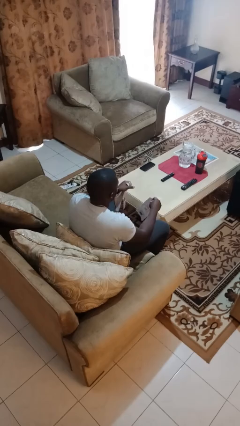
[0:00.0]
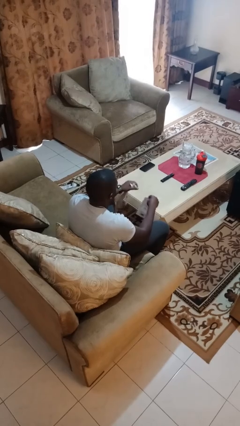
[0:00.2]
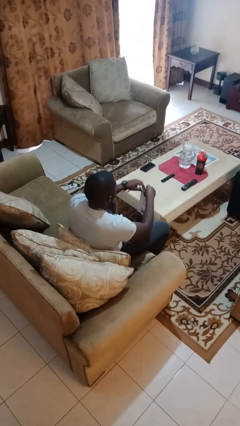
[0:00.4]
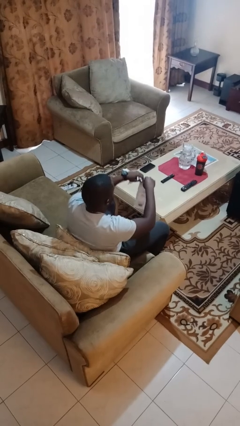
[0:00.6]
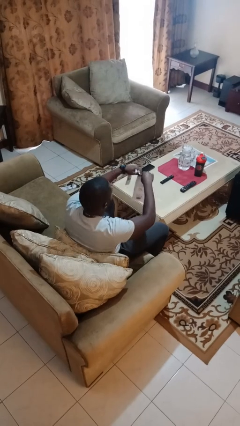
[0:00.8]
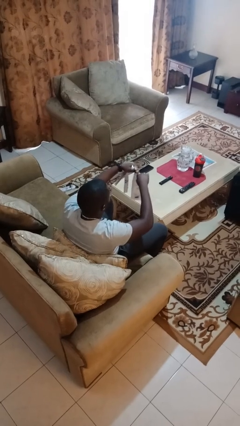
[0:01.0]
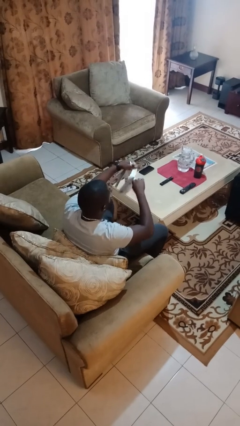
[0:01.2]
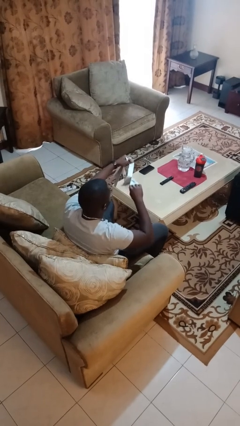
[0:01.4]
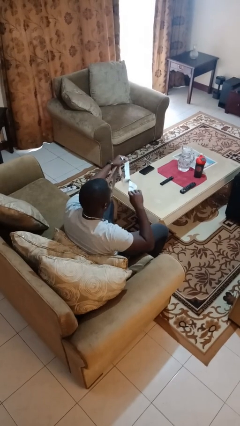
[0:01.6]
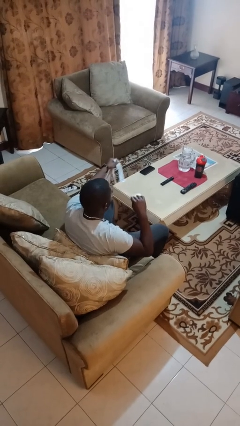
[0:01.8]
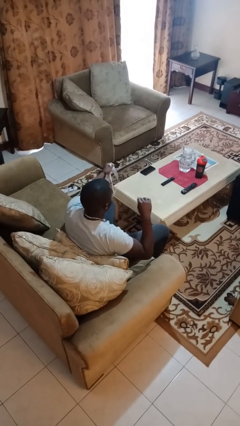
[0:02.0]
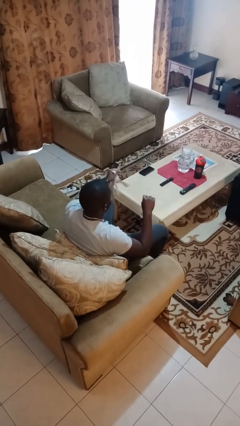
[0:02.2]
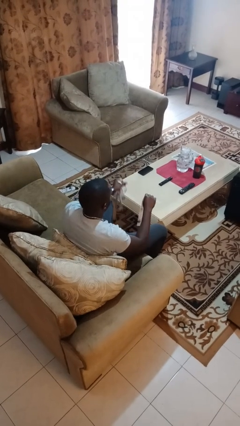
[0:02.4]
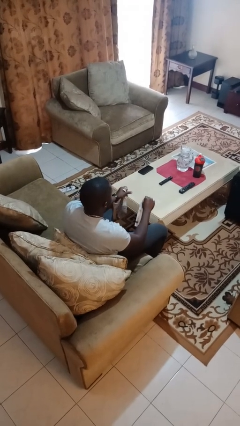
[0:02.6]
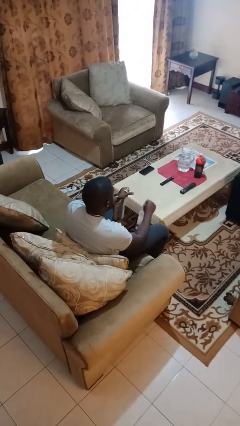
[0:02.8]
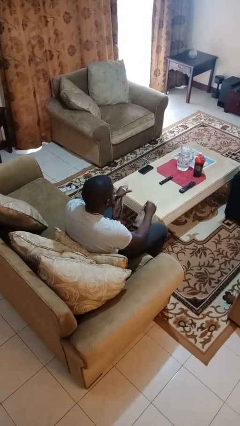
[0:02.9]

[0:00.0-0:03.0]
person tears paper

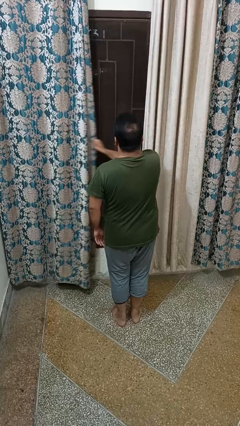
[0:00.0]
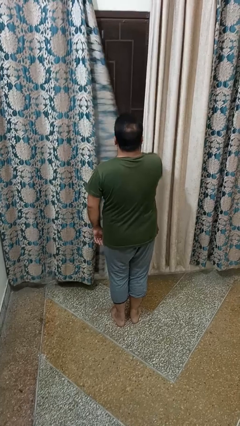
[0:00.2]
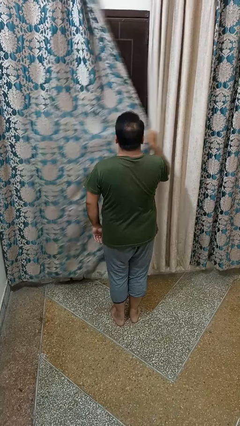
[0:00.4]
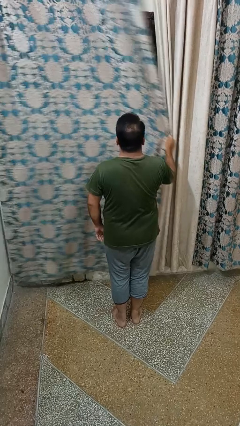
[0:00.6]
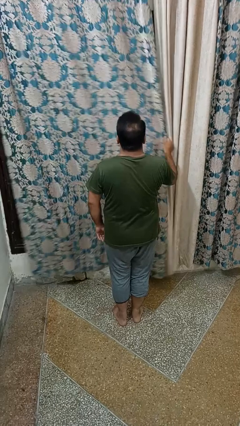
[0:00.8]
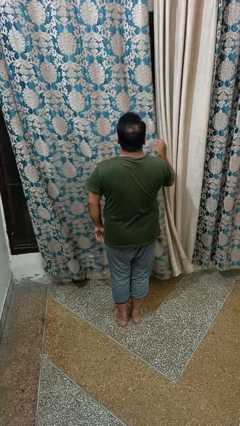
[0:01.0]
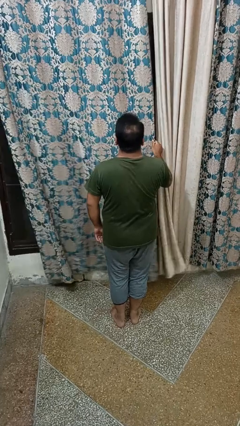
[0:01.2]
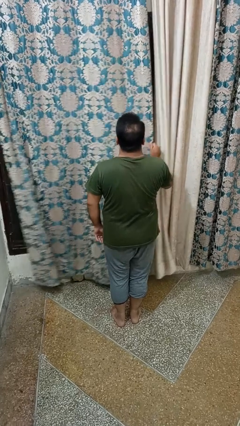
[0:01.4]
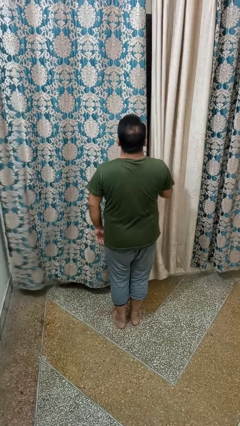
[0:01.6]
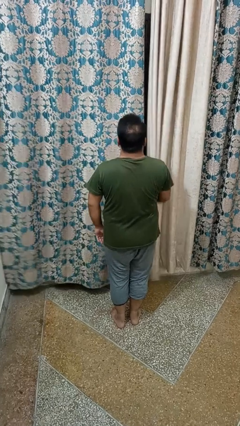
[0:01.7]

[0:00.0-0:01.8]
person closes curtains

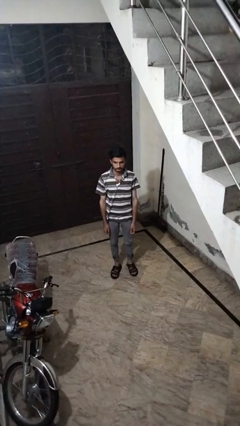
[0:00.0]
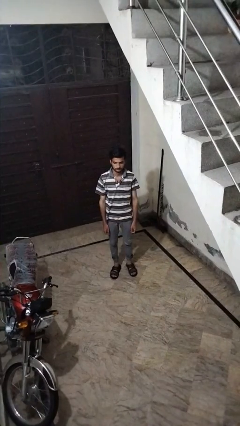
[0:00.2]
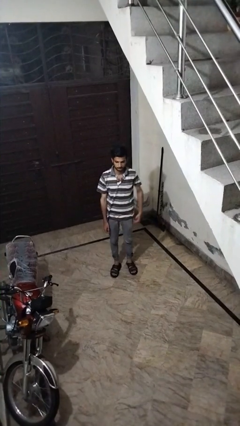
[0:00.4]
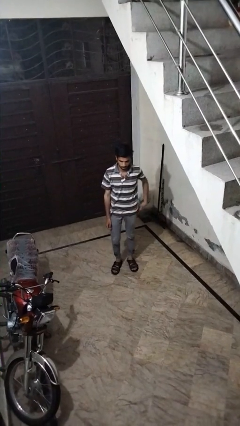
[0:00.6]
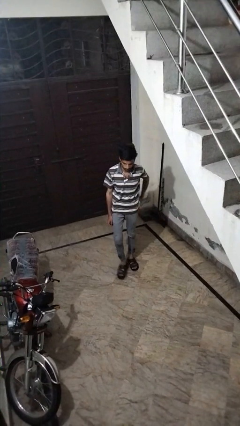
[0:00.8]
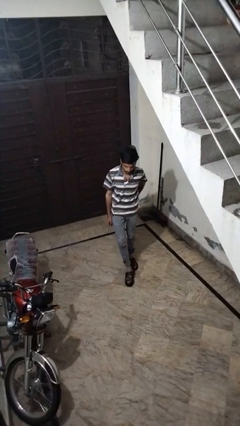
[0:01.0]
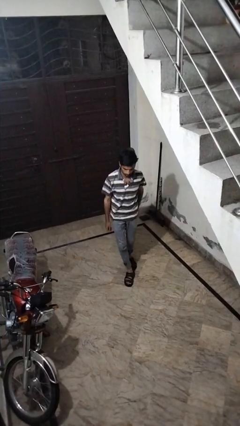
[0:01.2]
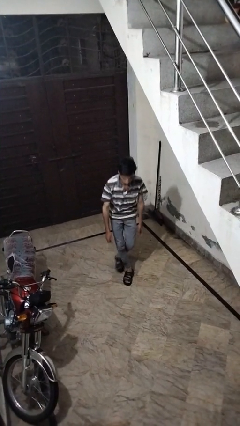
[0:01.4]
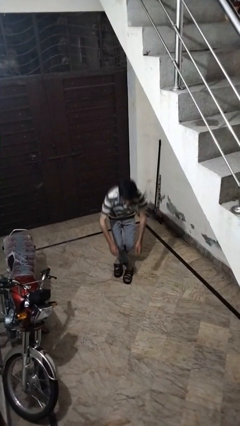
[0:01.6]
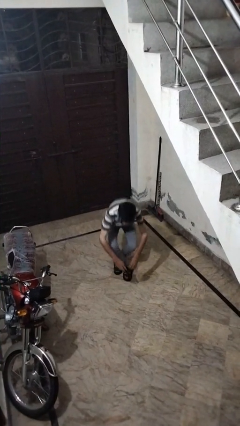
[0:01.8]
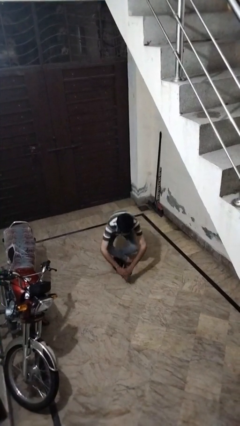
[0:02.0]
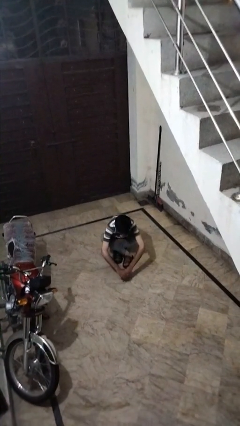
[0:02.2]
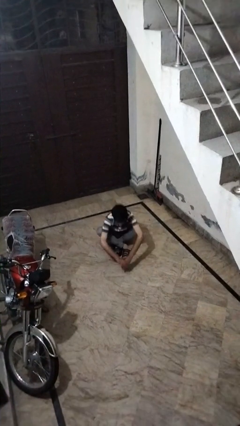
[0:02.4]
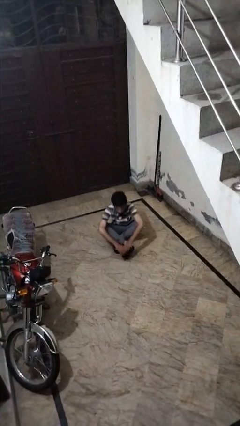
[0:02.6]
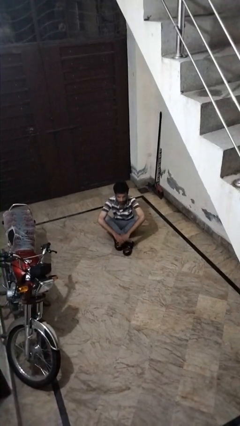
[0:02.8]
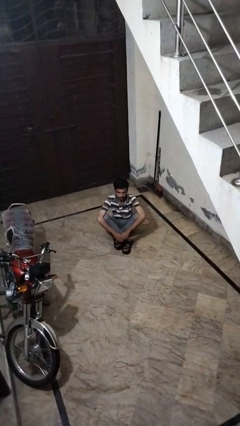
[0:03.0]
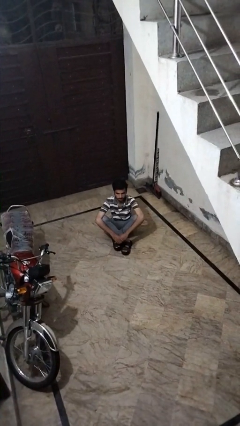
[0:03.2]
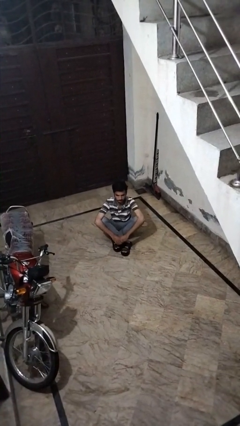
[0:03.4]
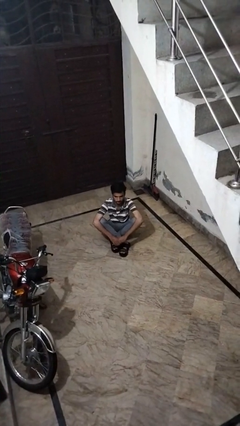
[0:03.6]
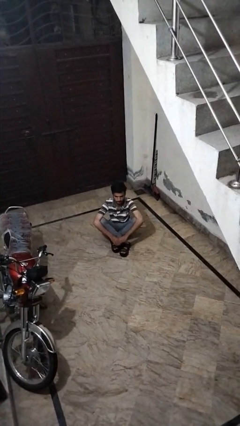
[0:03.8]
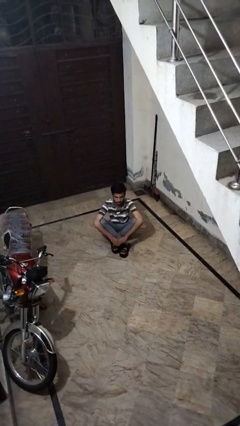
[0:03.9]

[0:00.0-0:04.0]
person sits crisscross

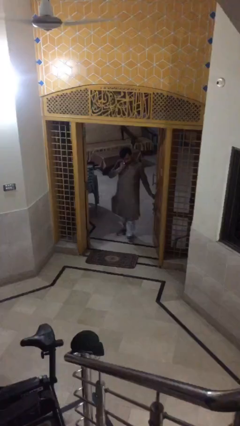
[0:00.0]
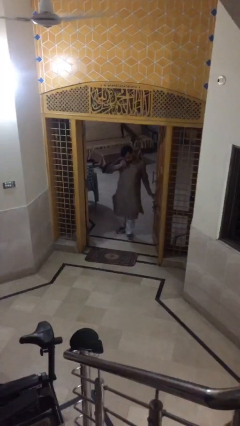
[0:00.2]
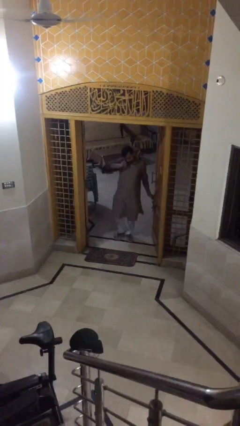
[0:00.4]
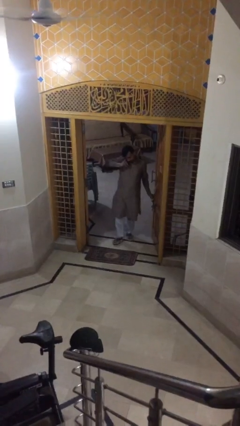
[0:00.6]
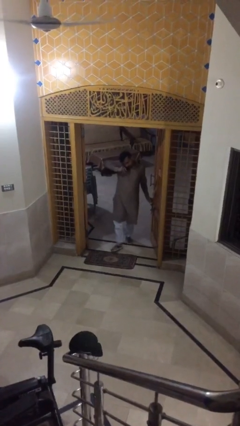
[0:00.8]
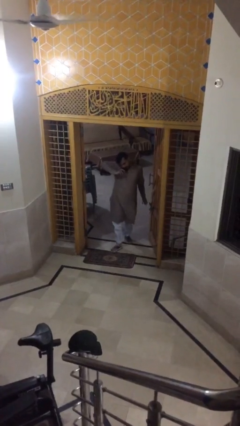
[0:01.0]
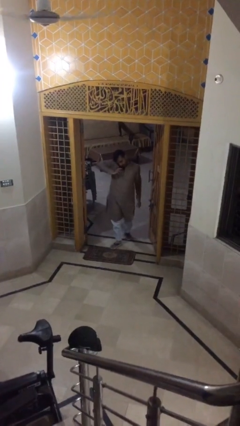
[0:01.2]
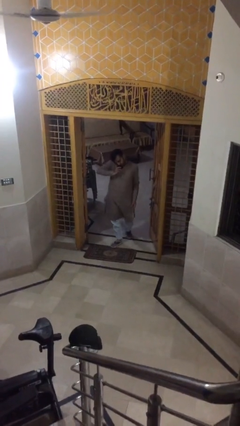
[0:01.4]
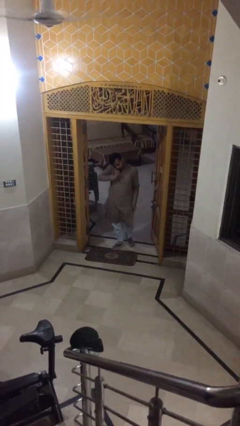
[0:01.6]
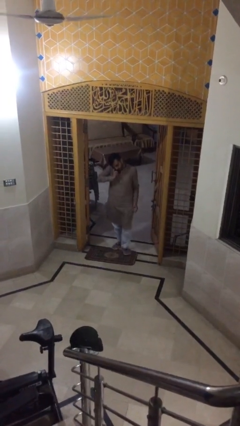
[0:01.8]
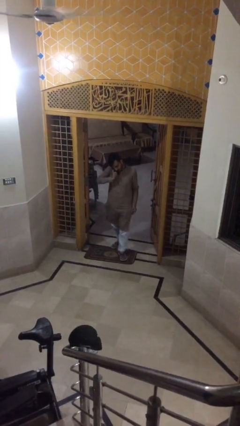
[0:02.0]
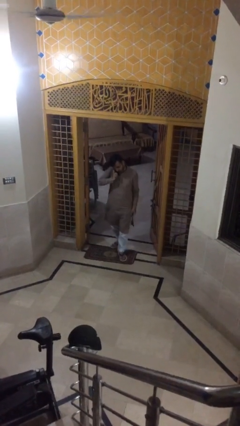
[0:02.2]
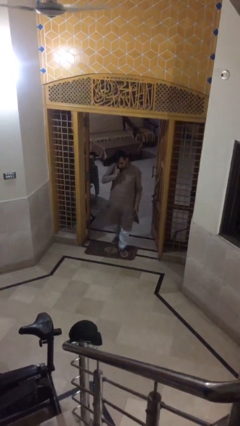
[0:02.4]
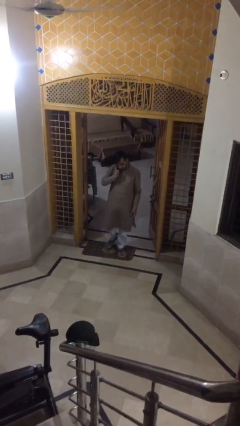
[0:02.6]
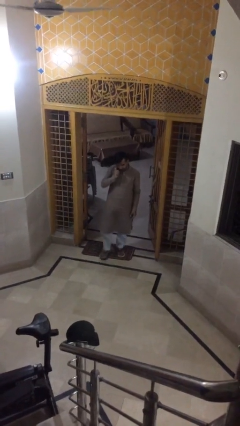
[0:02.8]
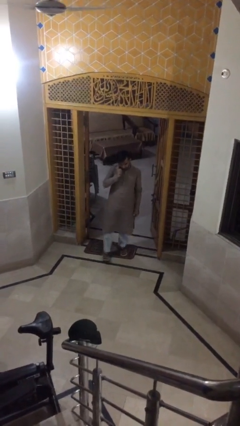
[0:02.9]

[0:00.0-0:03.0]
person enters scene through structure

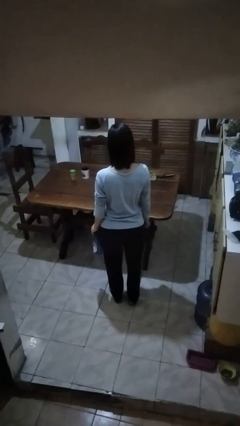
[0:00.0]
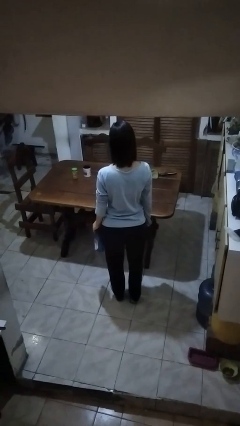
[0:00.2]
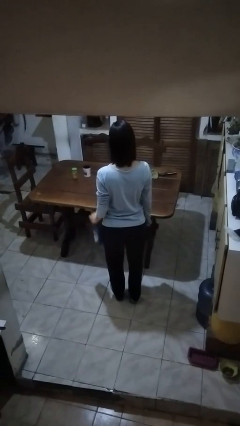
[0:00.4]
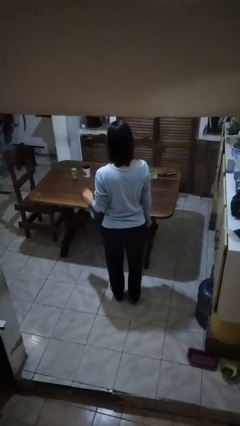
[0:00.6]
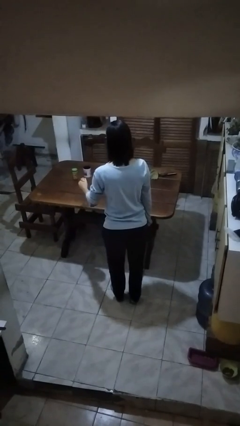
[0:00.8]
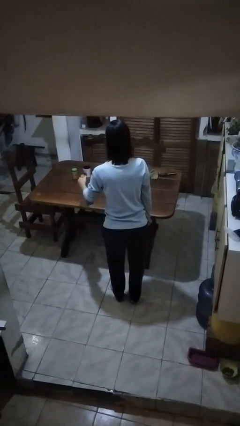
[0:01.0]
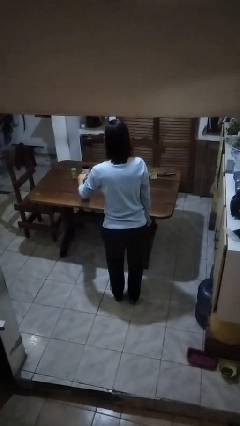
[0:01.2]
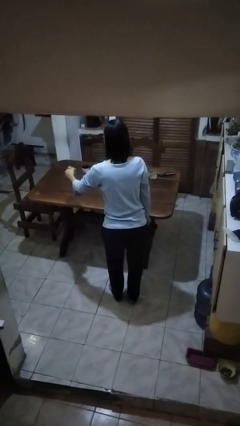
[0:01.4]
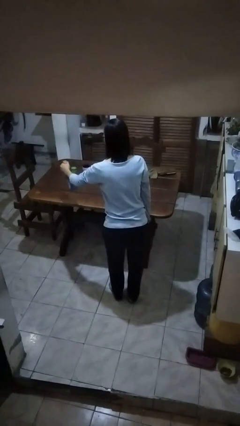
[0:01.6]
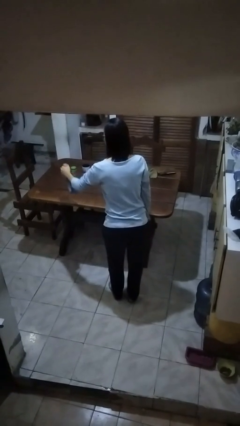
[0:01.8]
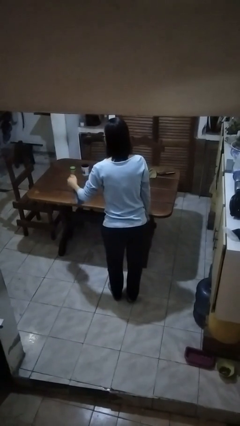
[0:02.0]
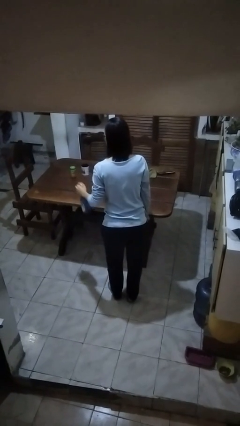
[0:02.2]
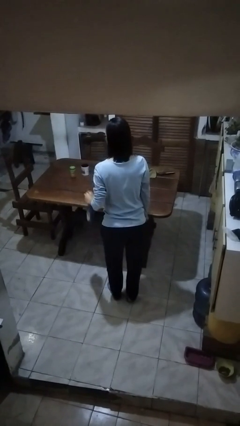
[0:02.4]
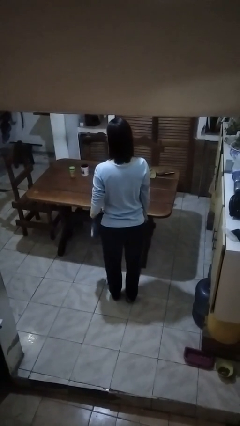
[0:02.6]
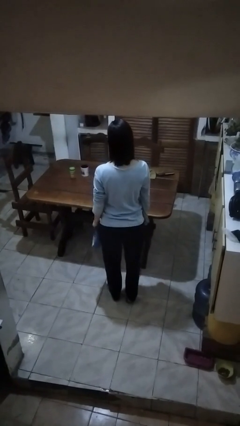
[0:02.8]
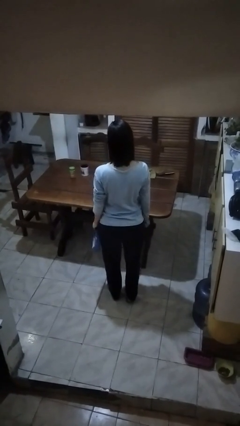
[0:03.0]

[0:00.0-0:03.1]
person sprays from bottle

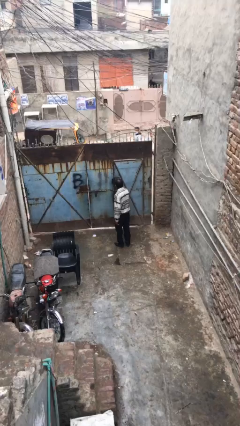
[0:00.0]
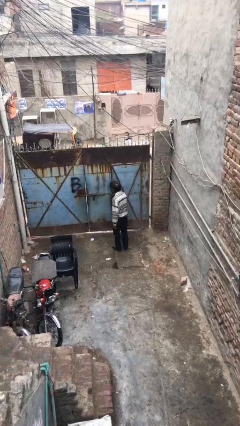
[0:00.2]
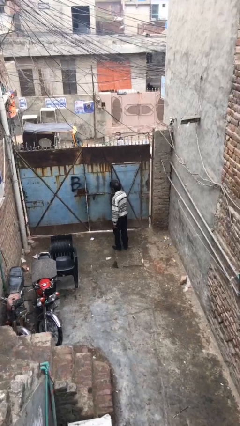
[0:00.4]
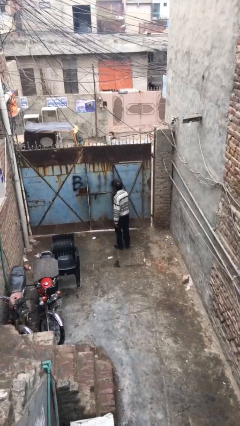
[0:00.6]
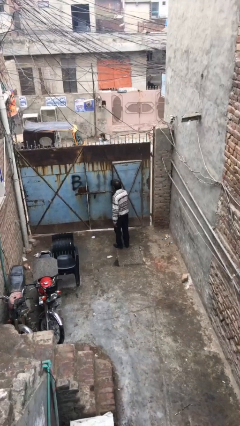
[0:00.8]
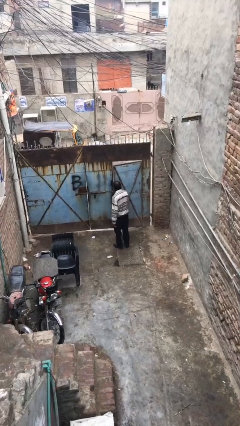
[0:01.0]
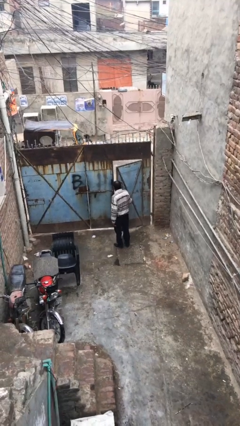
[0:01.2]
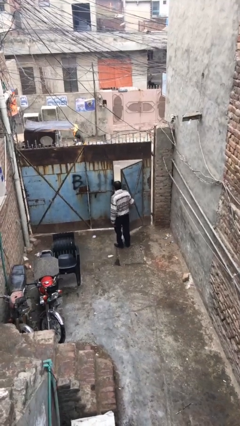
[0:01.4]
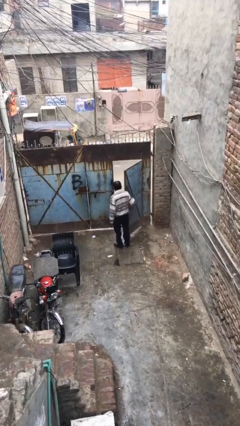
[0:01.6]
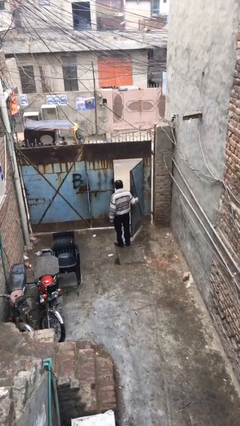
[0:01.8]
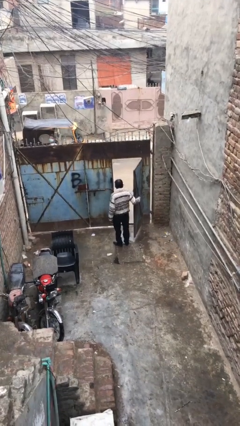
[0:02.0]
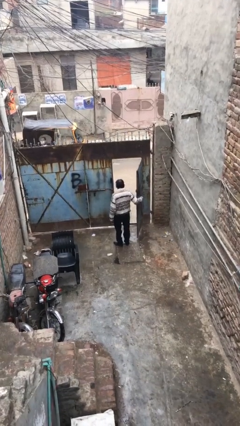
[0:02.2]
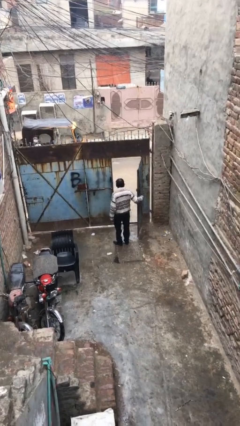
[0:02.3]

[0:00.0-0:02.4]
person opens facility door
